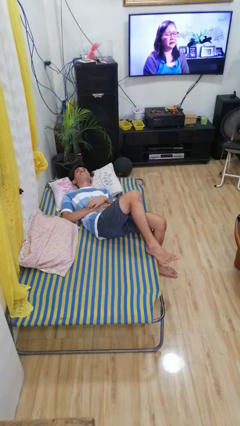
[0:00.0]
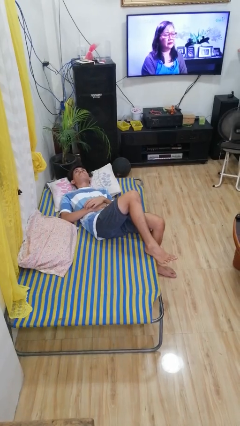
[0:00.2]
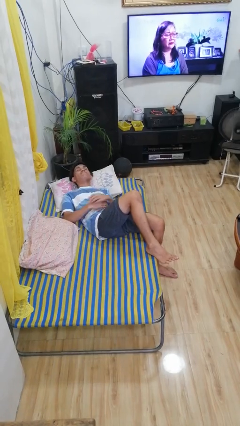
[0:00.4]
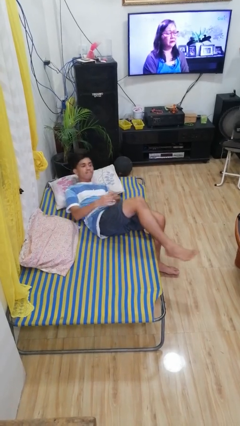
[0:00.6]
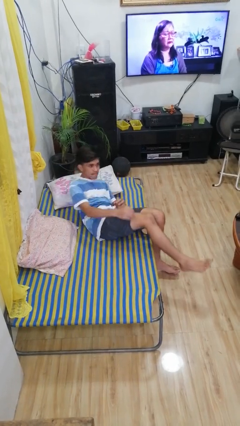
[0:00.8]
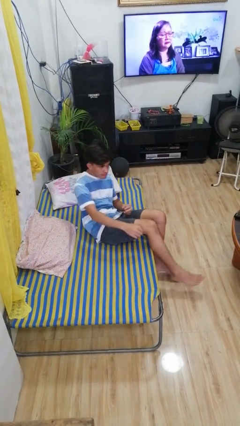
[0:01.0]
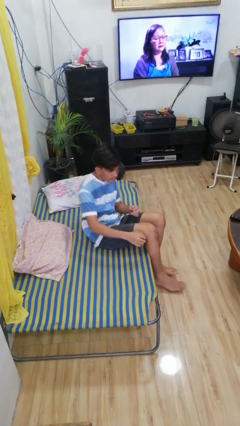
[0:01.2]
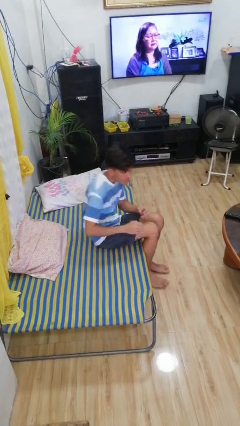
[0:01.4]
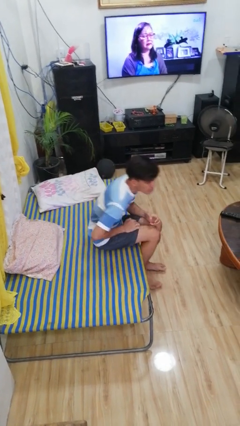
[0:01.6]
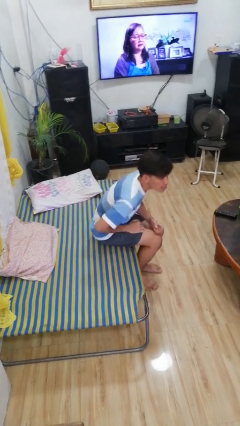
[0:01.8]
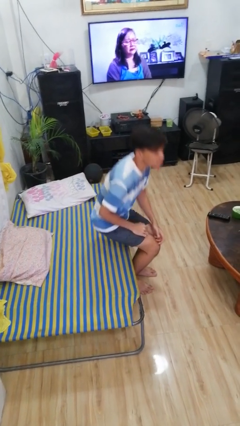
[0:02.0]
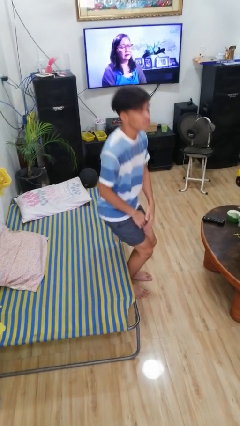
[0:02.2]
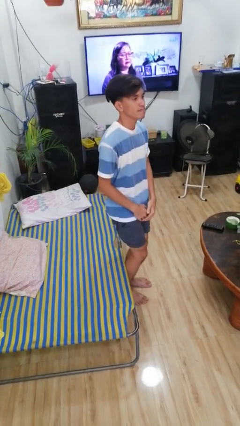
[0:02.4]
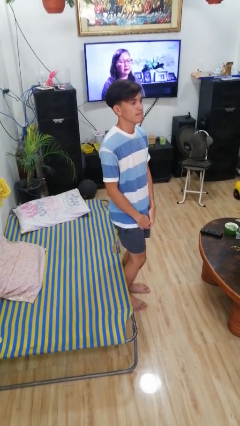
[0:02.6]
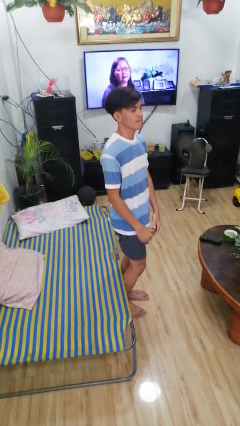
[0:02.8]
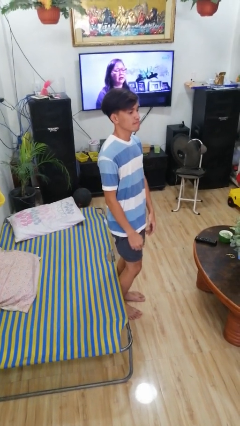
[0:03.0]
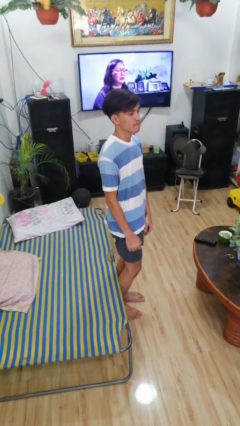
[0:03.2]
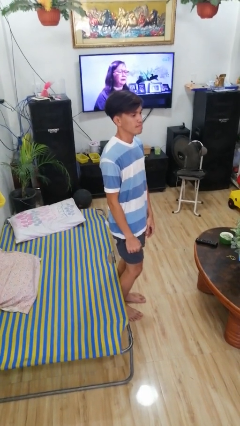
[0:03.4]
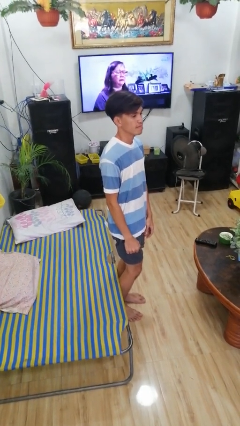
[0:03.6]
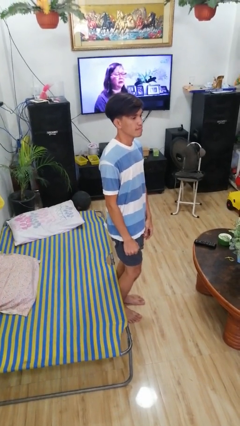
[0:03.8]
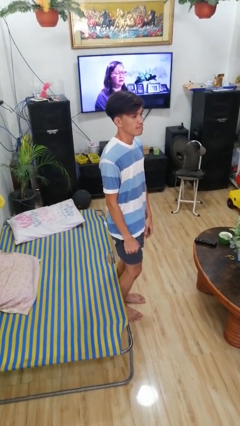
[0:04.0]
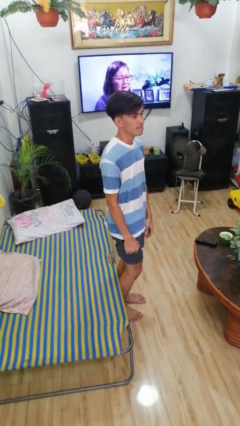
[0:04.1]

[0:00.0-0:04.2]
person stands up

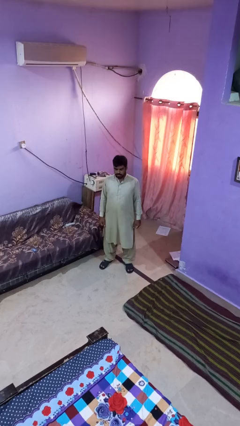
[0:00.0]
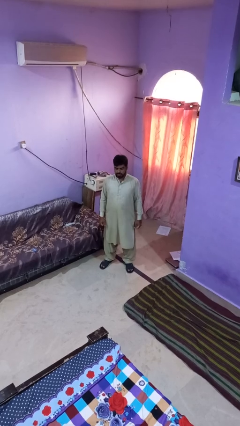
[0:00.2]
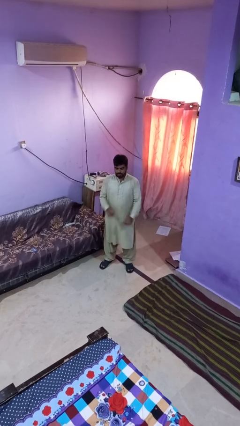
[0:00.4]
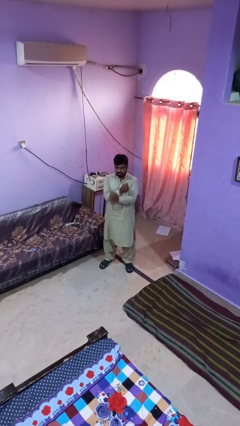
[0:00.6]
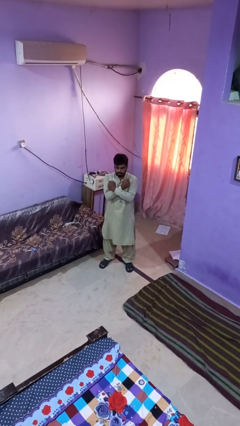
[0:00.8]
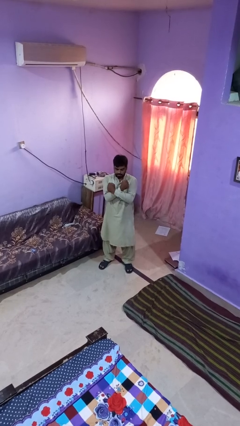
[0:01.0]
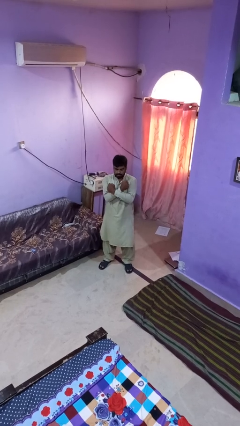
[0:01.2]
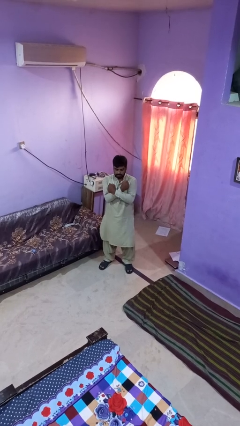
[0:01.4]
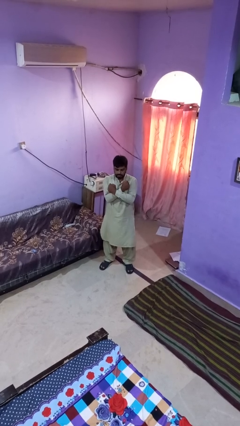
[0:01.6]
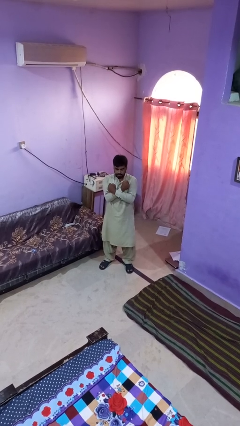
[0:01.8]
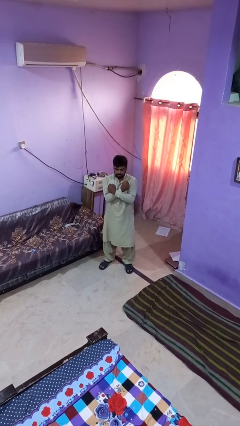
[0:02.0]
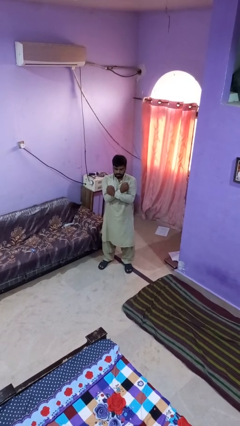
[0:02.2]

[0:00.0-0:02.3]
person gestures arms x

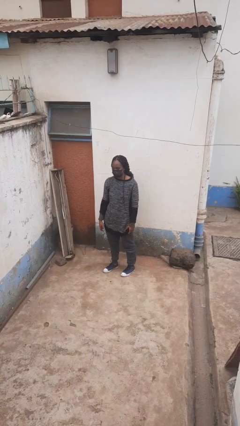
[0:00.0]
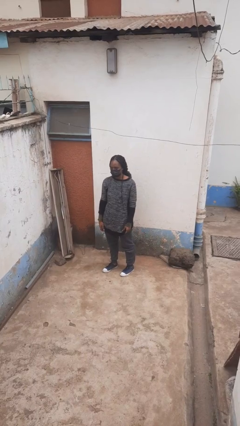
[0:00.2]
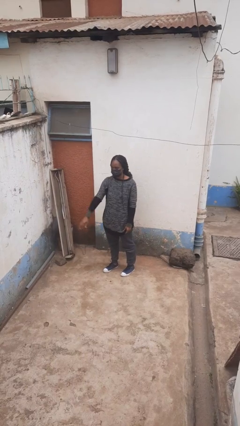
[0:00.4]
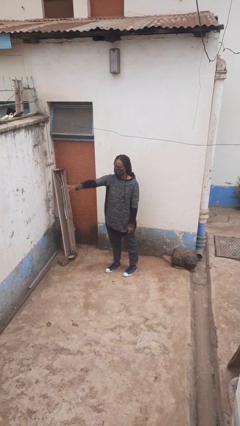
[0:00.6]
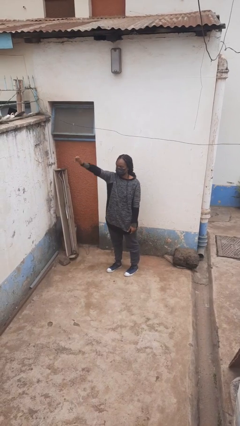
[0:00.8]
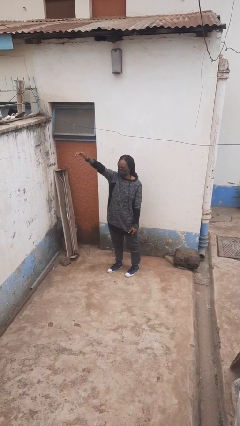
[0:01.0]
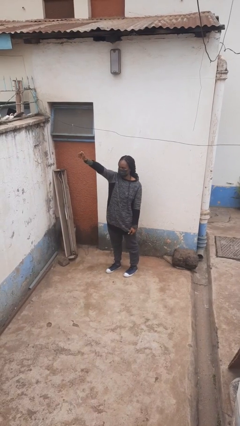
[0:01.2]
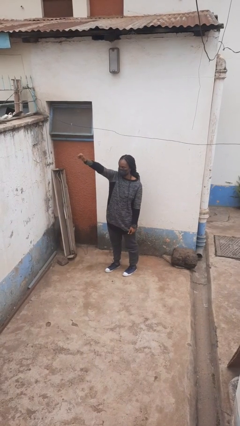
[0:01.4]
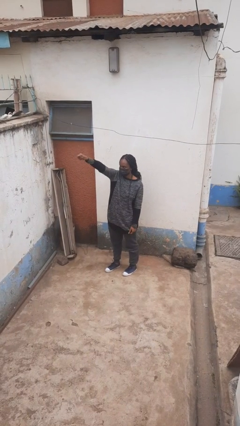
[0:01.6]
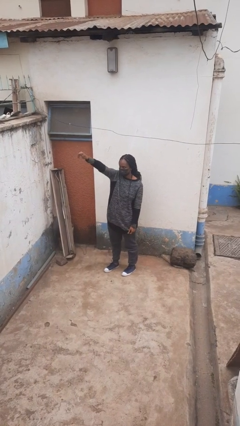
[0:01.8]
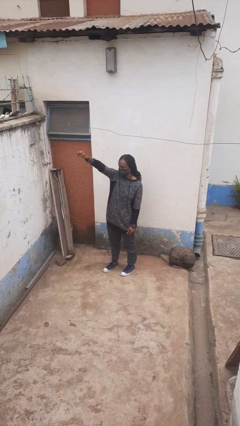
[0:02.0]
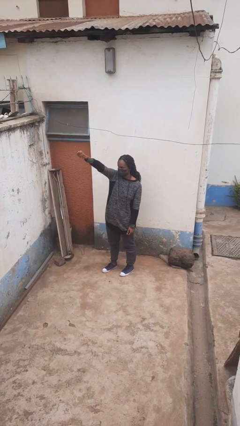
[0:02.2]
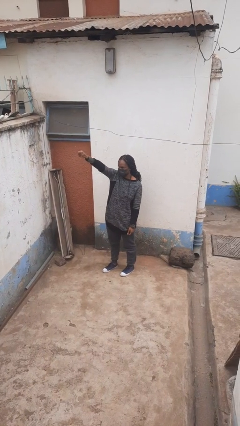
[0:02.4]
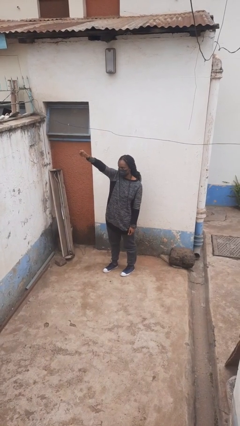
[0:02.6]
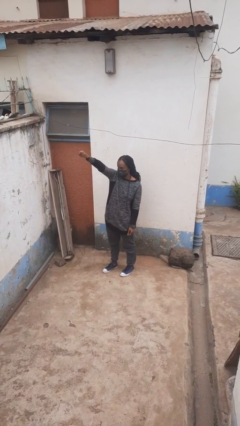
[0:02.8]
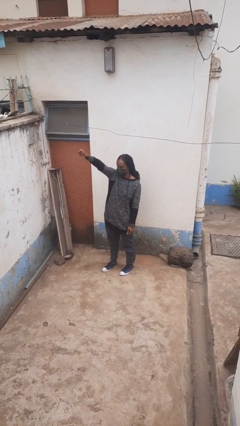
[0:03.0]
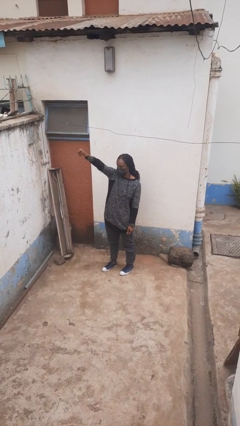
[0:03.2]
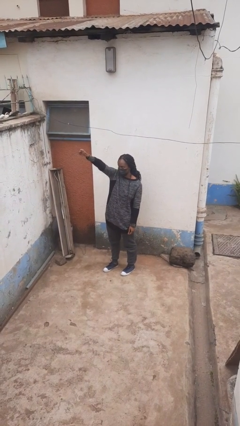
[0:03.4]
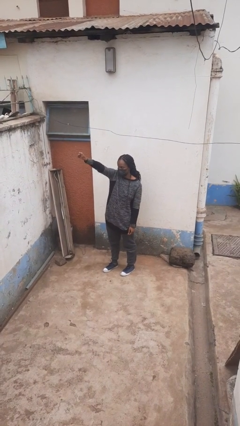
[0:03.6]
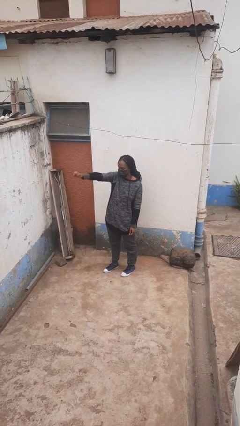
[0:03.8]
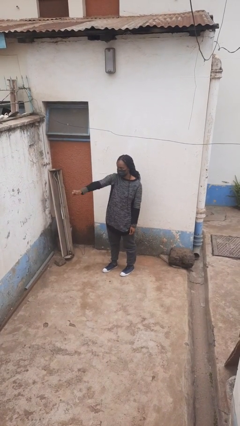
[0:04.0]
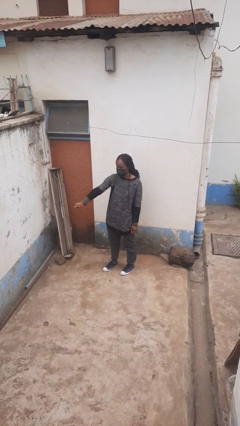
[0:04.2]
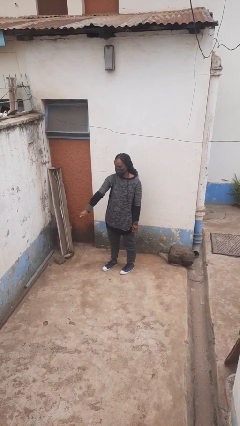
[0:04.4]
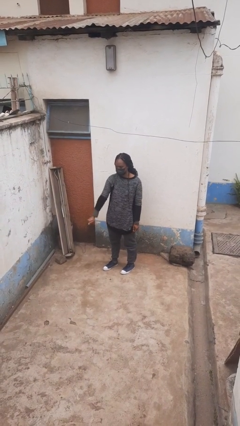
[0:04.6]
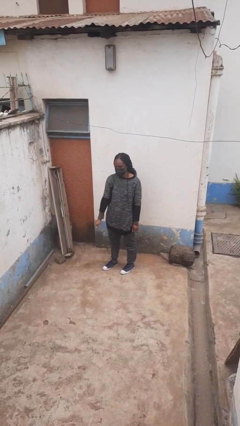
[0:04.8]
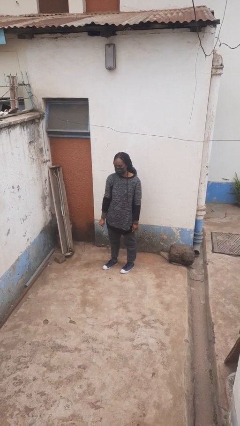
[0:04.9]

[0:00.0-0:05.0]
person gestures come here

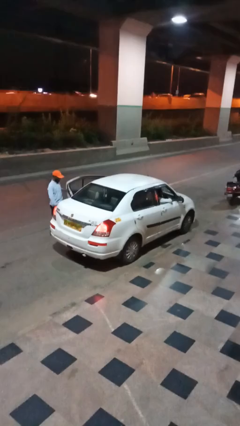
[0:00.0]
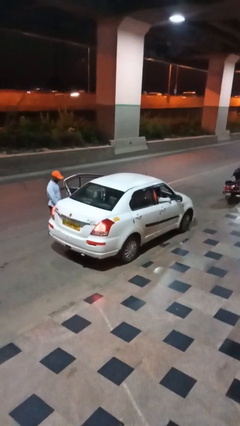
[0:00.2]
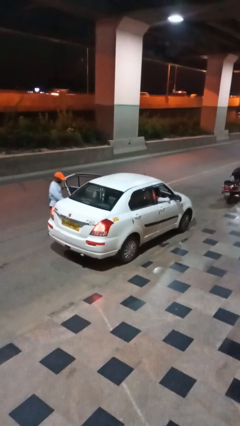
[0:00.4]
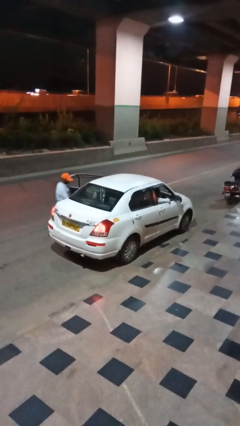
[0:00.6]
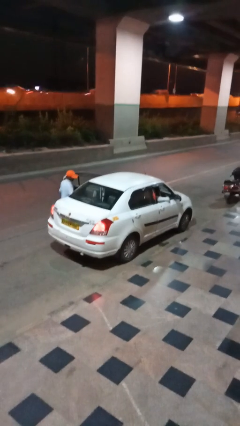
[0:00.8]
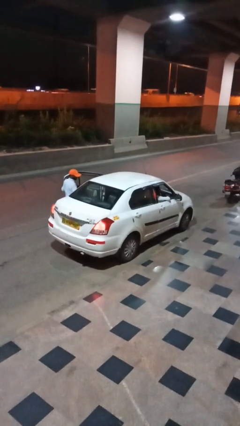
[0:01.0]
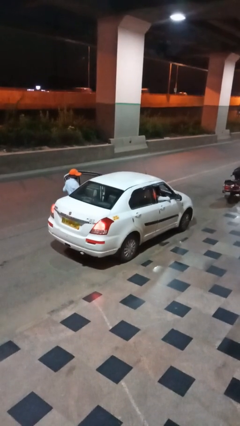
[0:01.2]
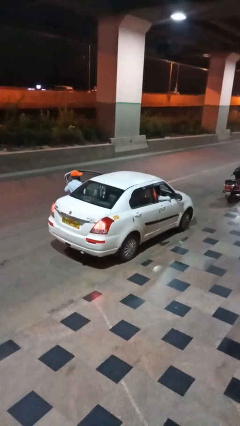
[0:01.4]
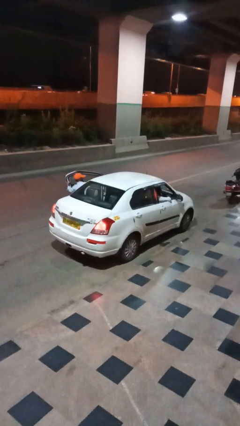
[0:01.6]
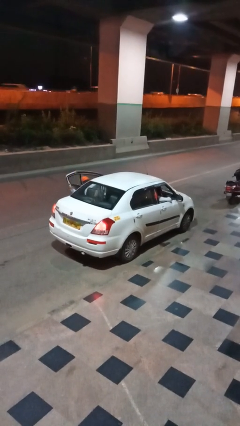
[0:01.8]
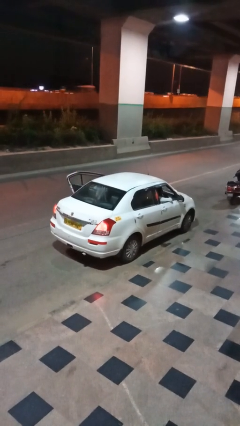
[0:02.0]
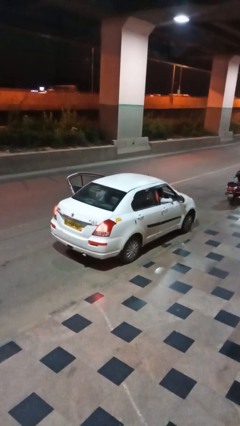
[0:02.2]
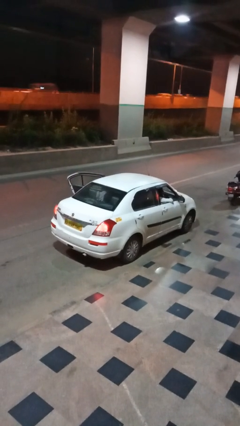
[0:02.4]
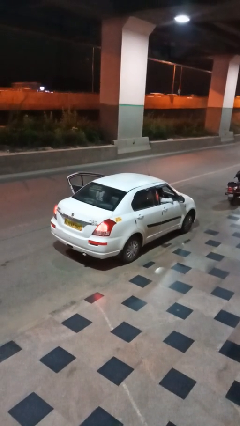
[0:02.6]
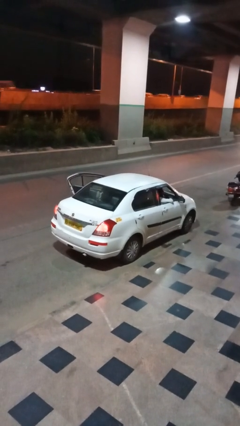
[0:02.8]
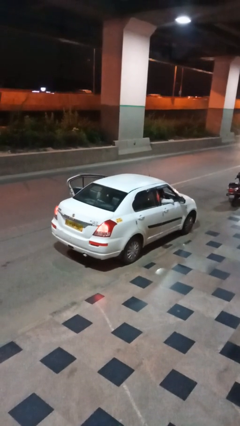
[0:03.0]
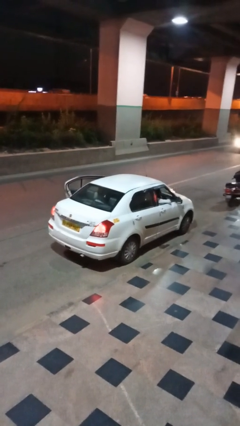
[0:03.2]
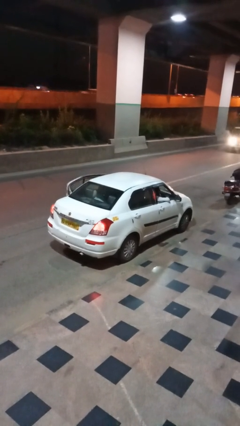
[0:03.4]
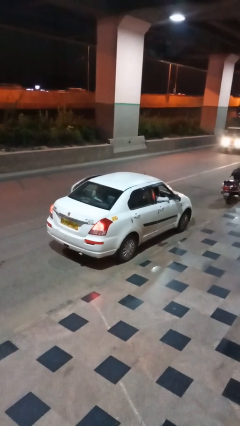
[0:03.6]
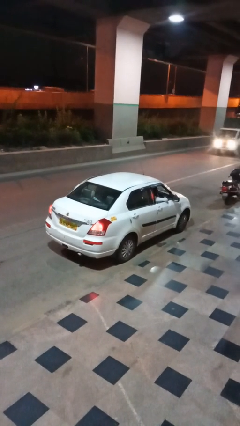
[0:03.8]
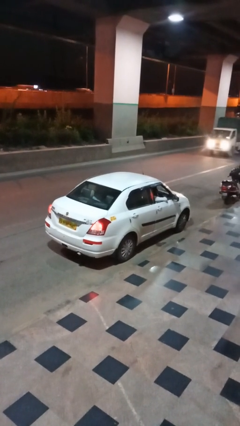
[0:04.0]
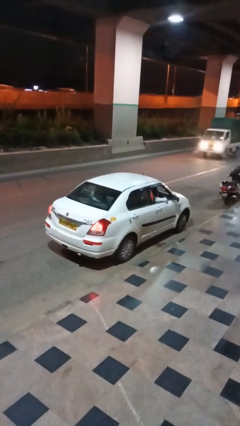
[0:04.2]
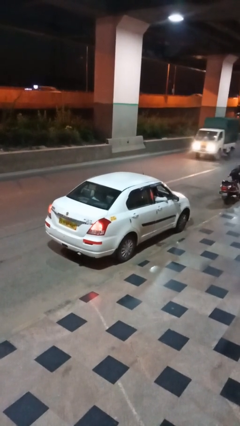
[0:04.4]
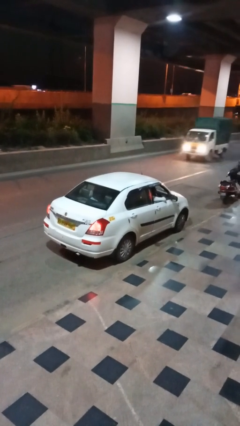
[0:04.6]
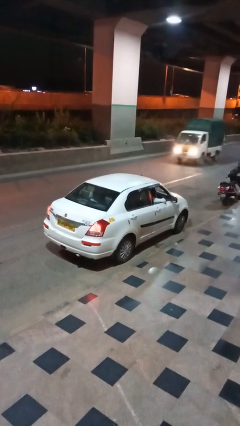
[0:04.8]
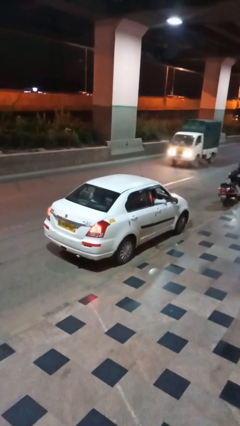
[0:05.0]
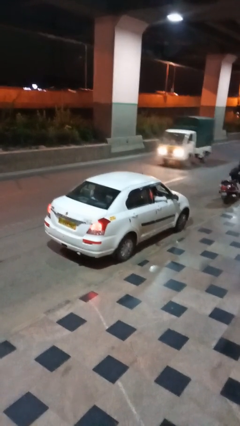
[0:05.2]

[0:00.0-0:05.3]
car picks up person

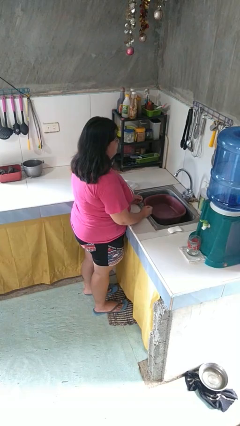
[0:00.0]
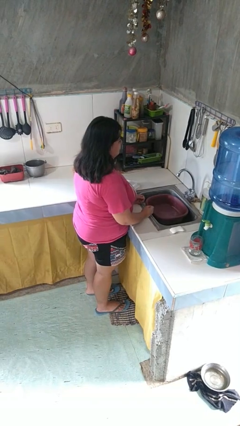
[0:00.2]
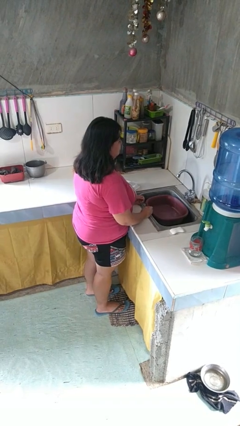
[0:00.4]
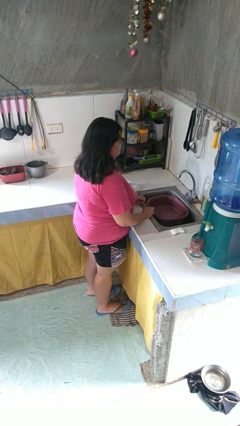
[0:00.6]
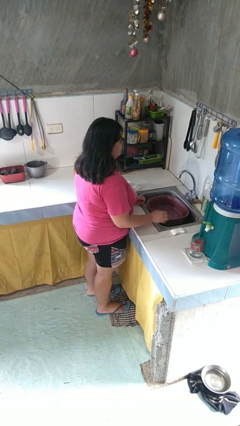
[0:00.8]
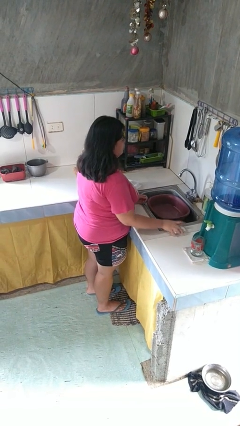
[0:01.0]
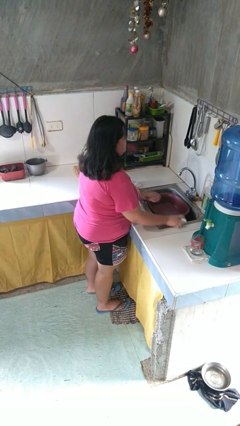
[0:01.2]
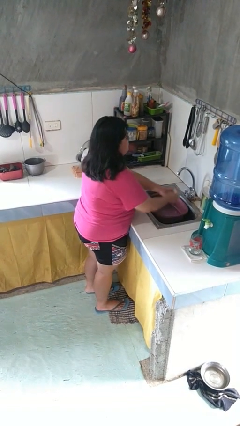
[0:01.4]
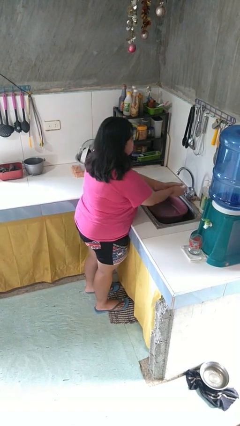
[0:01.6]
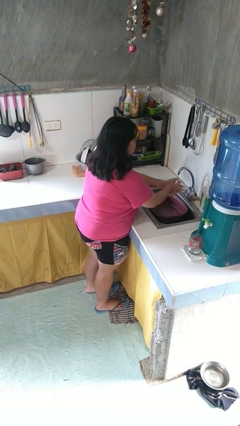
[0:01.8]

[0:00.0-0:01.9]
person washes hands
